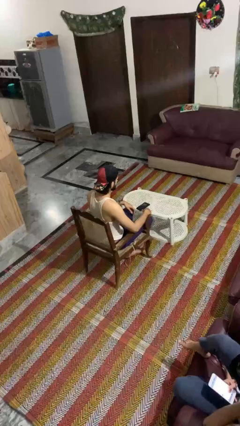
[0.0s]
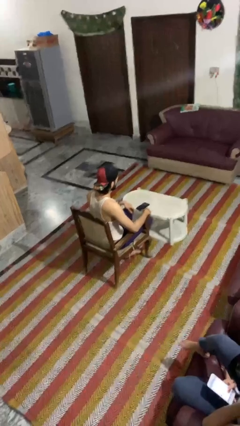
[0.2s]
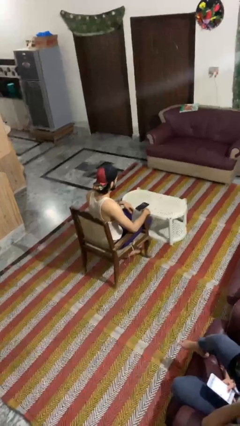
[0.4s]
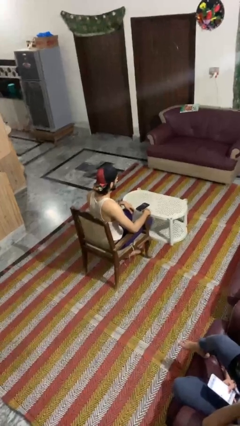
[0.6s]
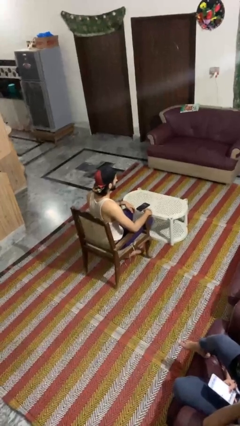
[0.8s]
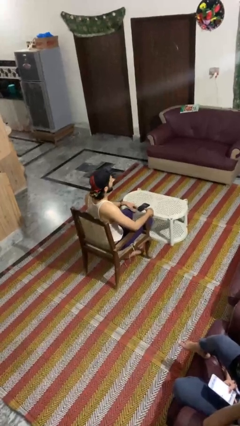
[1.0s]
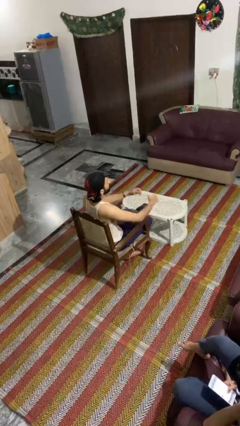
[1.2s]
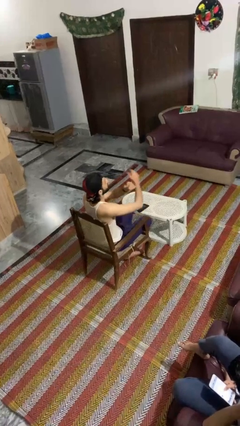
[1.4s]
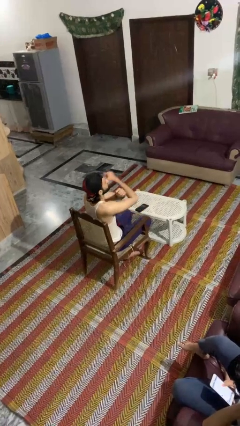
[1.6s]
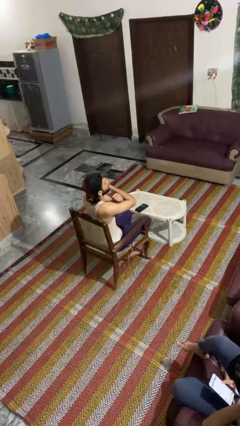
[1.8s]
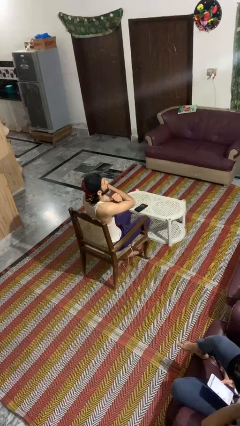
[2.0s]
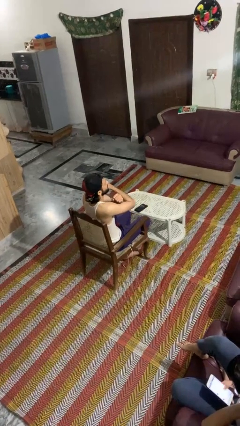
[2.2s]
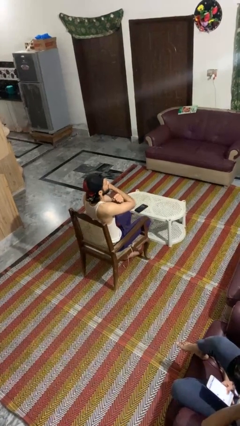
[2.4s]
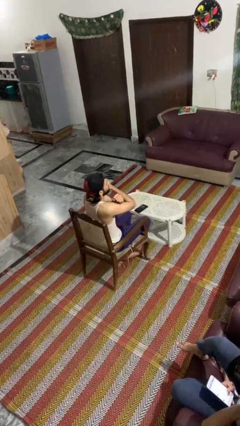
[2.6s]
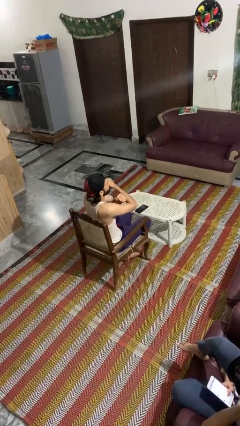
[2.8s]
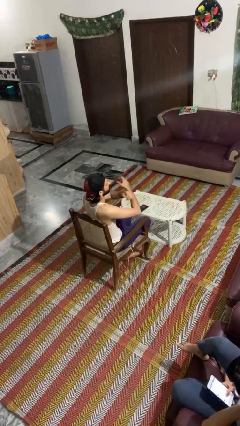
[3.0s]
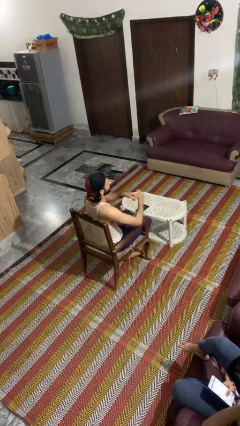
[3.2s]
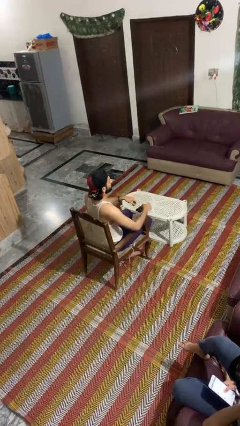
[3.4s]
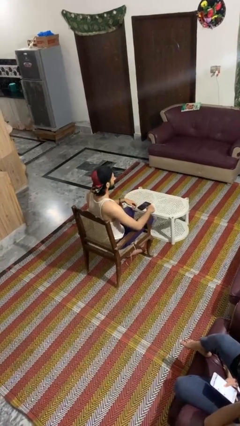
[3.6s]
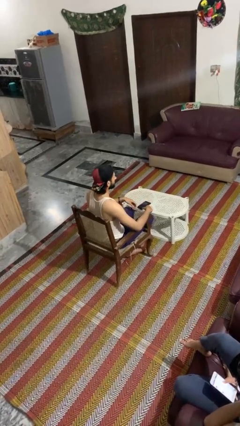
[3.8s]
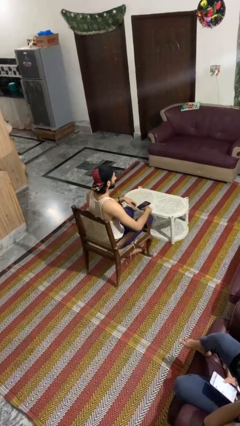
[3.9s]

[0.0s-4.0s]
person gestures arms x

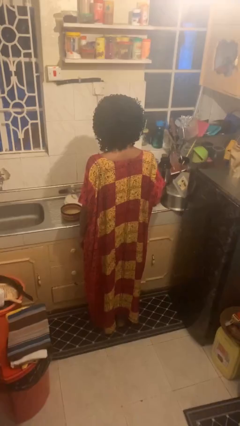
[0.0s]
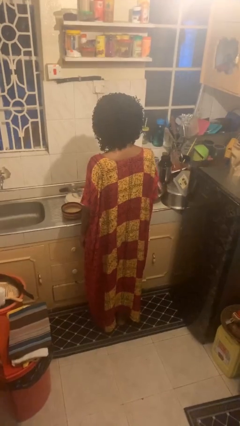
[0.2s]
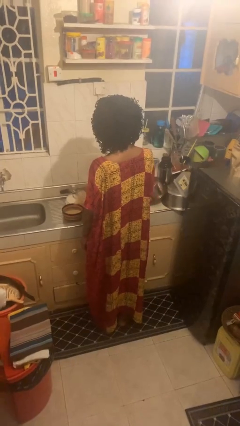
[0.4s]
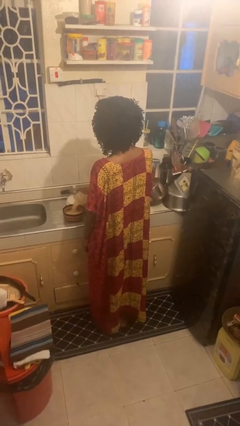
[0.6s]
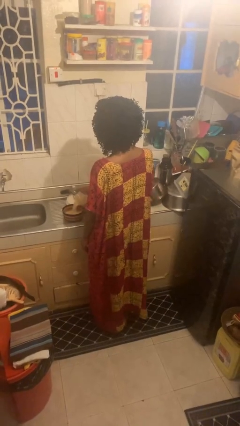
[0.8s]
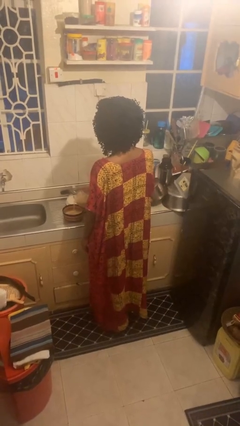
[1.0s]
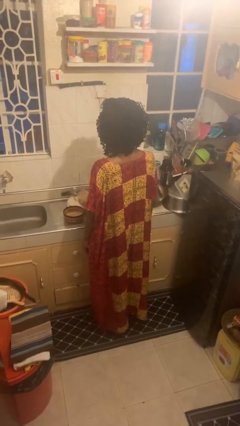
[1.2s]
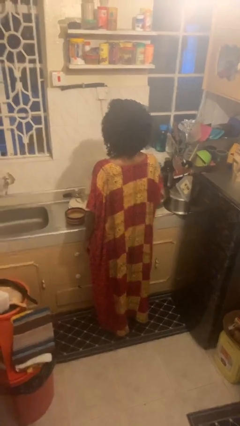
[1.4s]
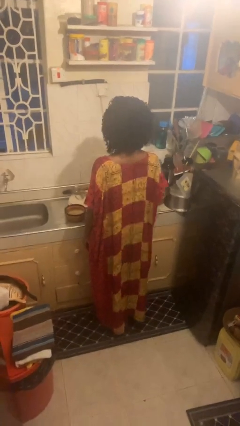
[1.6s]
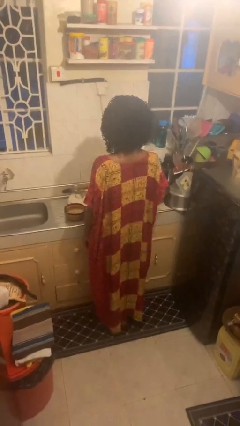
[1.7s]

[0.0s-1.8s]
person pours into bowl

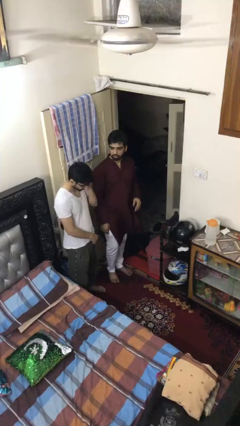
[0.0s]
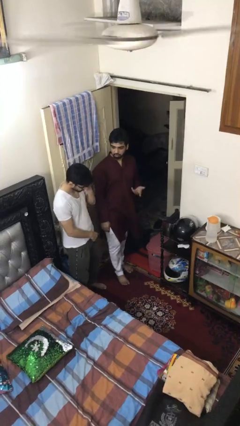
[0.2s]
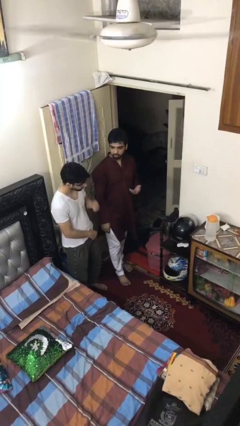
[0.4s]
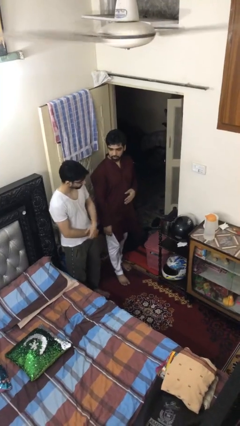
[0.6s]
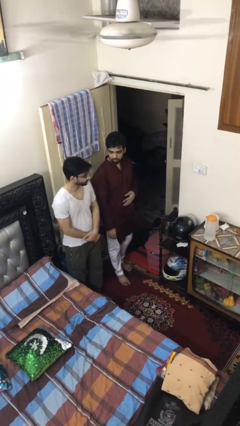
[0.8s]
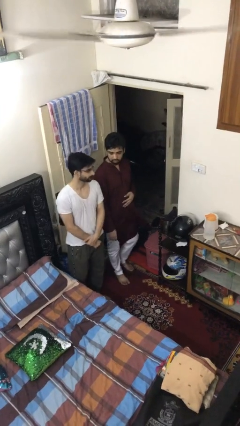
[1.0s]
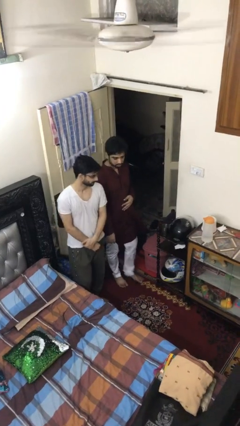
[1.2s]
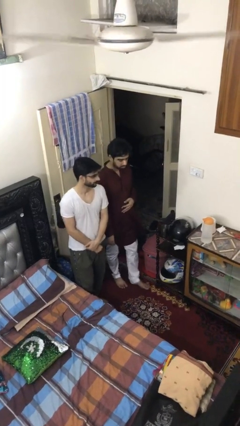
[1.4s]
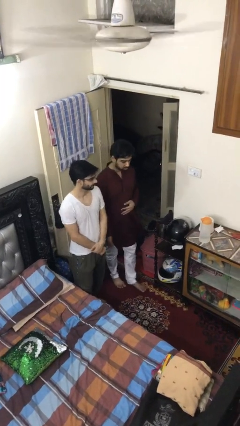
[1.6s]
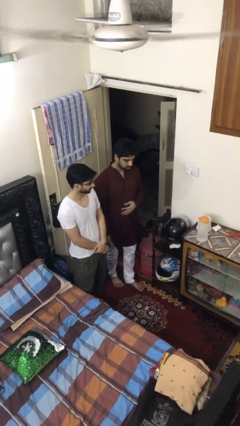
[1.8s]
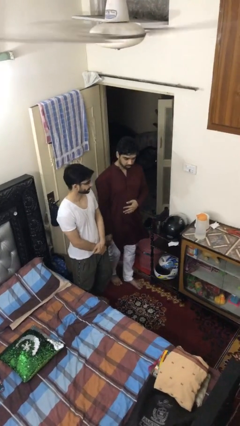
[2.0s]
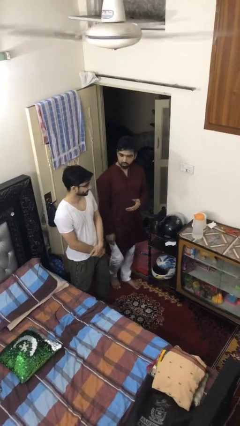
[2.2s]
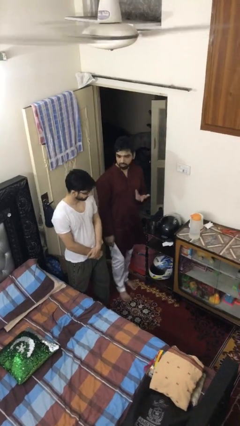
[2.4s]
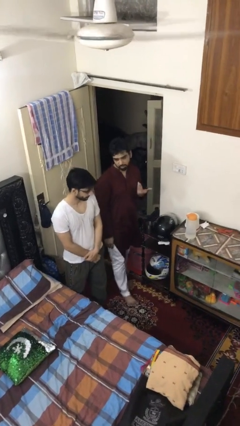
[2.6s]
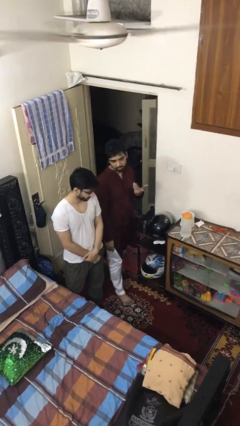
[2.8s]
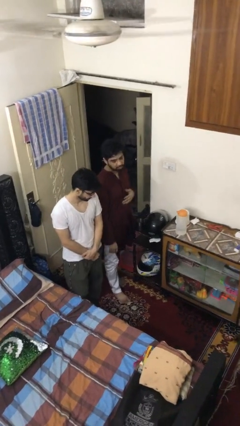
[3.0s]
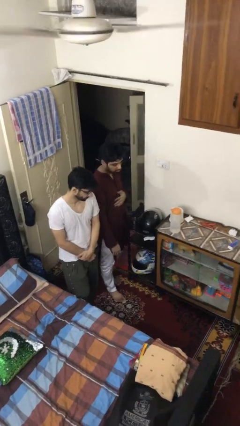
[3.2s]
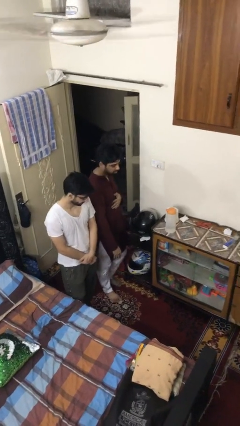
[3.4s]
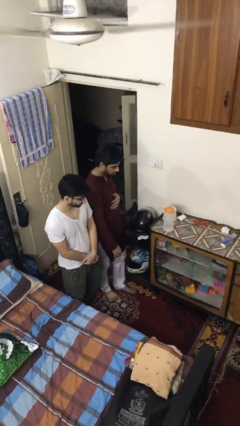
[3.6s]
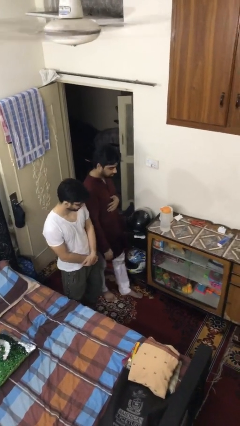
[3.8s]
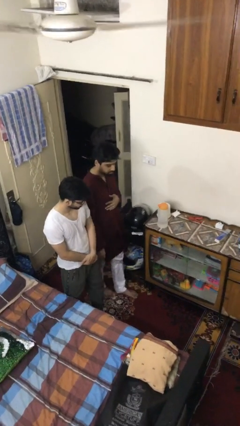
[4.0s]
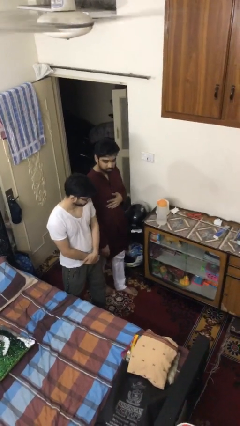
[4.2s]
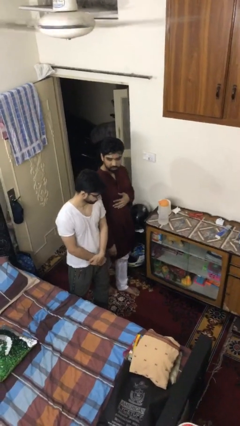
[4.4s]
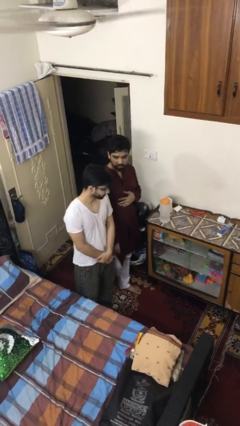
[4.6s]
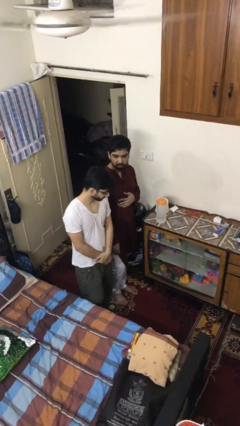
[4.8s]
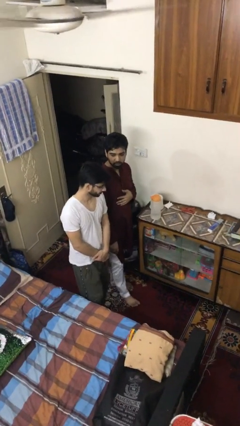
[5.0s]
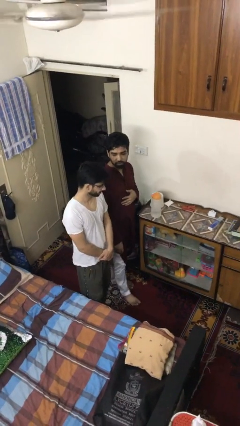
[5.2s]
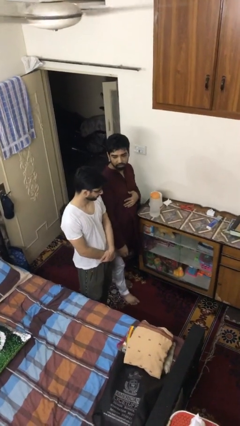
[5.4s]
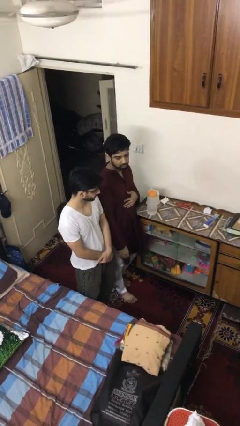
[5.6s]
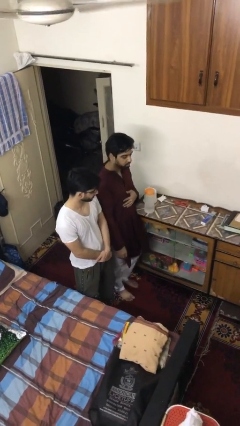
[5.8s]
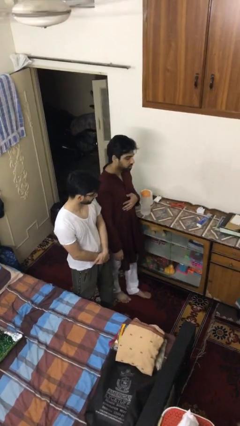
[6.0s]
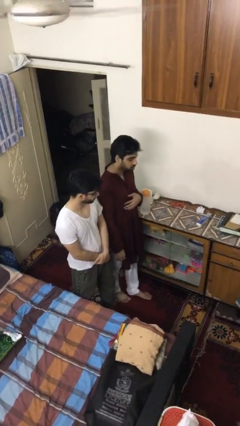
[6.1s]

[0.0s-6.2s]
person talks to person

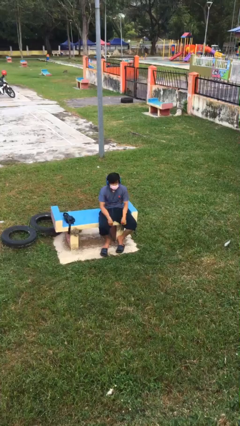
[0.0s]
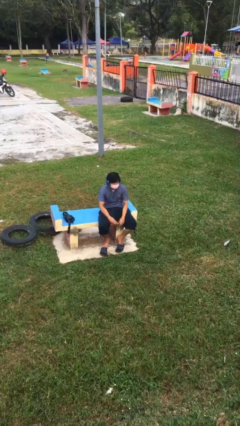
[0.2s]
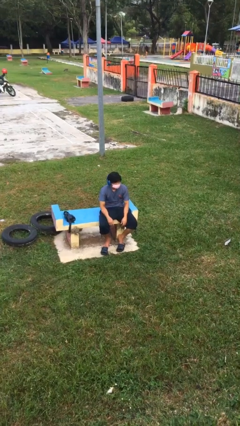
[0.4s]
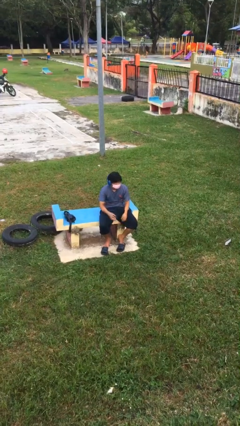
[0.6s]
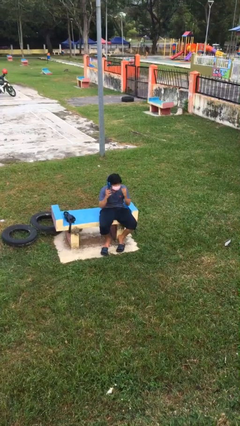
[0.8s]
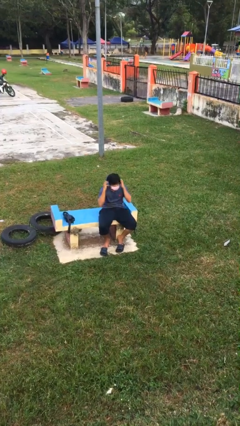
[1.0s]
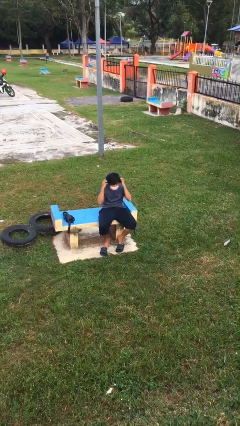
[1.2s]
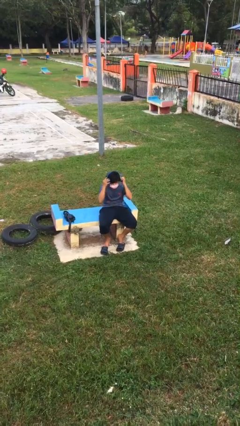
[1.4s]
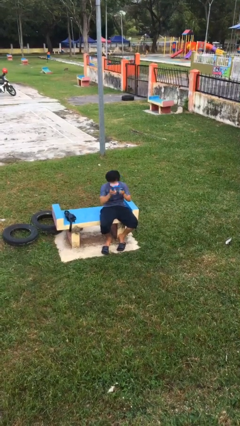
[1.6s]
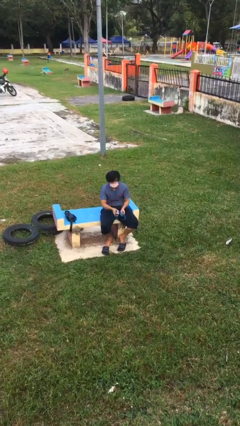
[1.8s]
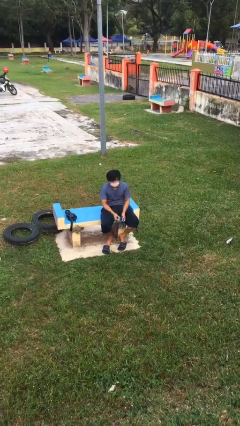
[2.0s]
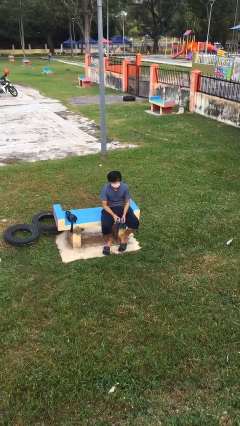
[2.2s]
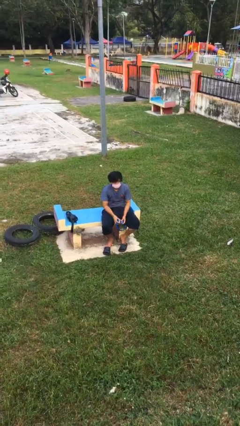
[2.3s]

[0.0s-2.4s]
person takes off headphones

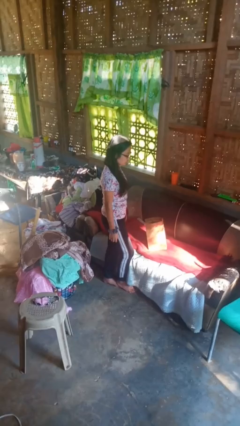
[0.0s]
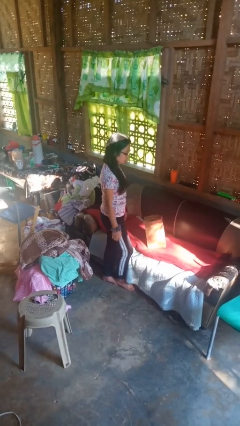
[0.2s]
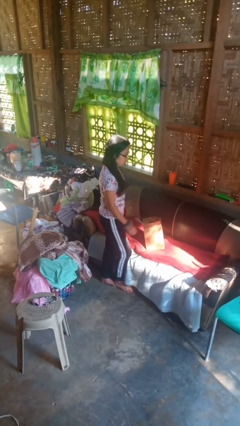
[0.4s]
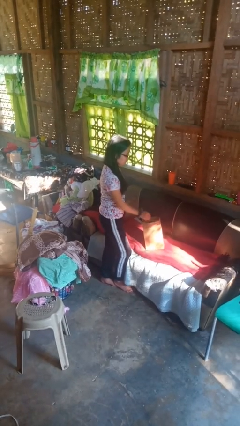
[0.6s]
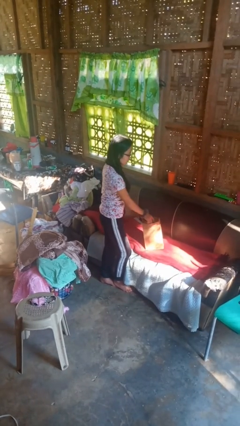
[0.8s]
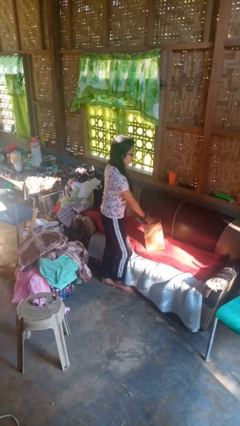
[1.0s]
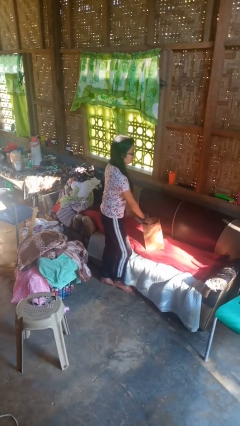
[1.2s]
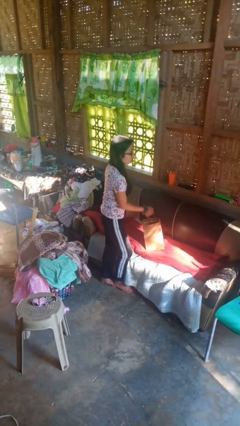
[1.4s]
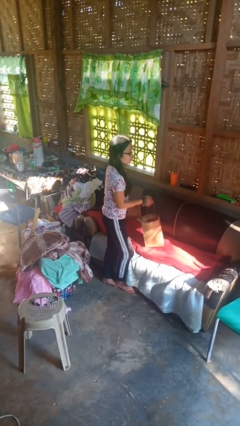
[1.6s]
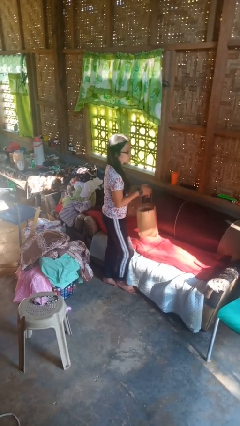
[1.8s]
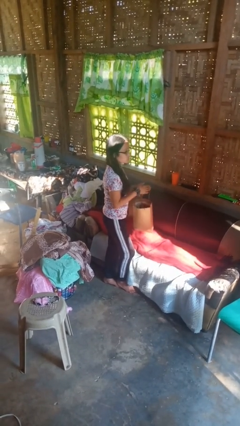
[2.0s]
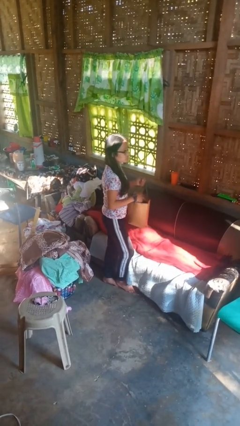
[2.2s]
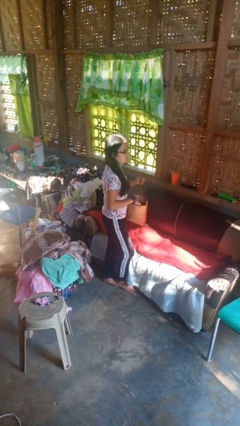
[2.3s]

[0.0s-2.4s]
person picks up object from couch

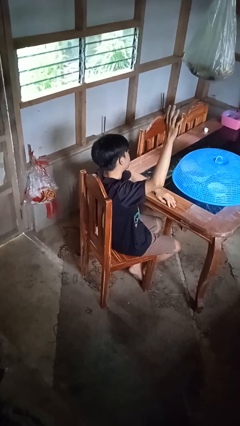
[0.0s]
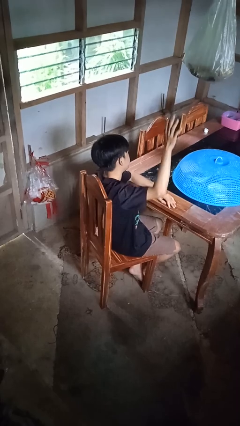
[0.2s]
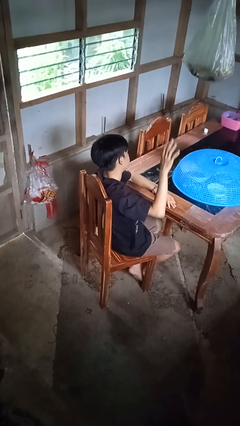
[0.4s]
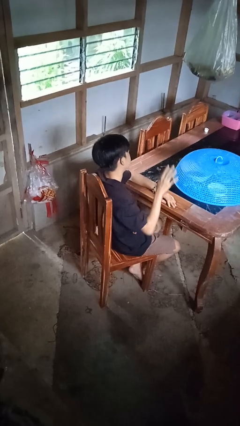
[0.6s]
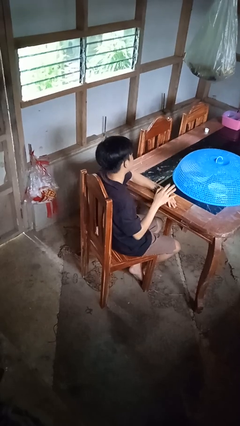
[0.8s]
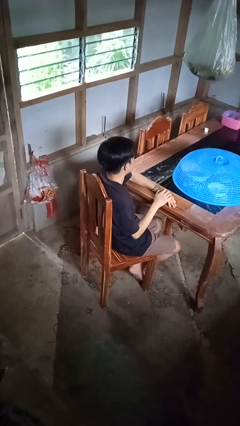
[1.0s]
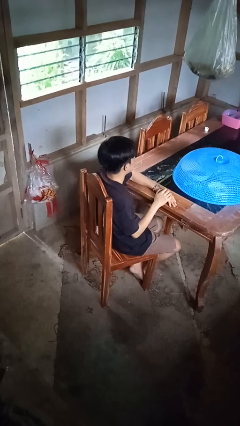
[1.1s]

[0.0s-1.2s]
person gestures lower hand
